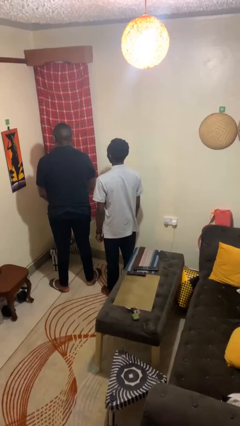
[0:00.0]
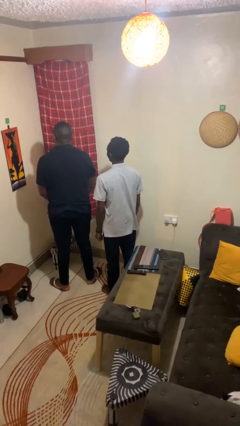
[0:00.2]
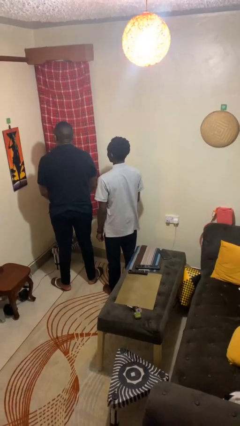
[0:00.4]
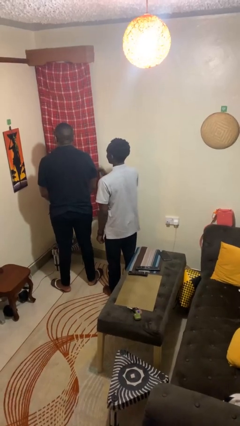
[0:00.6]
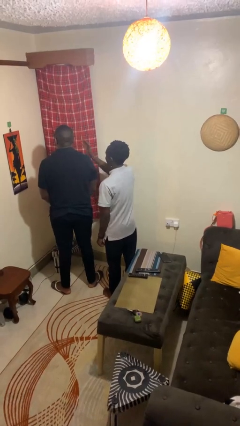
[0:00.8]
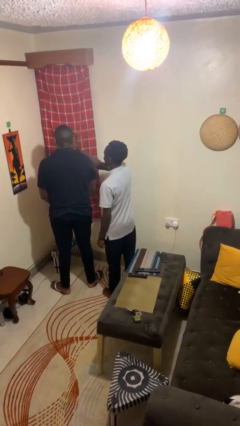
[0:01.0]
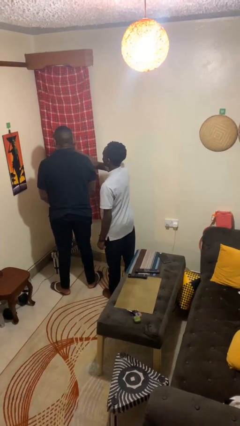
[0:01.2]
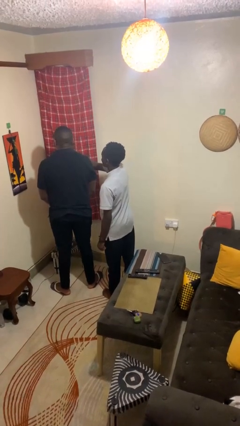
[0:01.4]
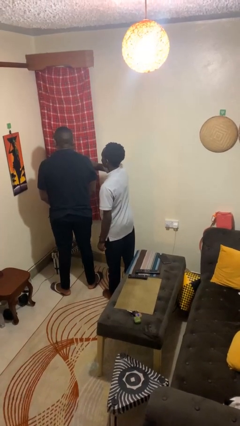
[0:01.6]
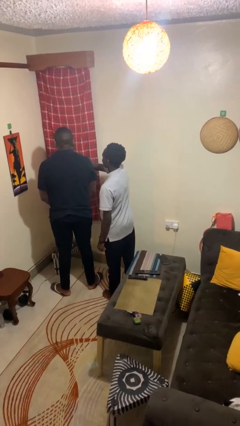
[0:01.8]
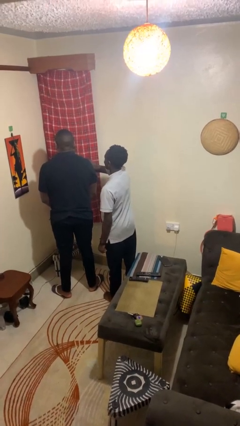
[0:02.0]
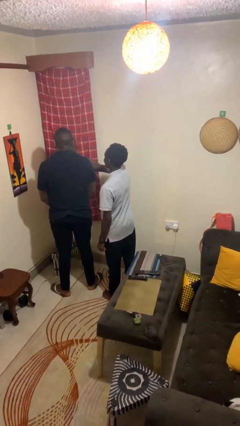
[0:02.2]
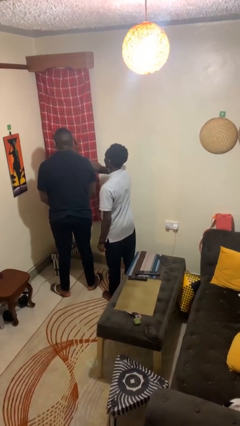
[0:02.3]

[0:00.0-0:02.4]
person touches face of person

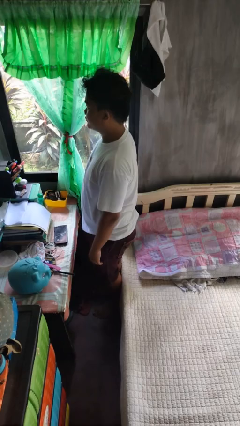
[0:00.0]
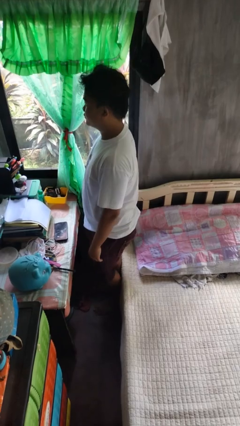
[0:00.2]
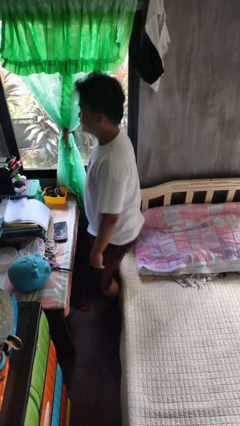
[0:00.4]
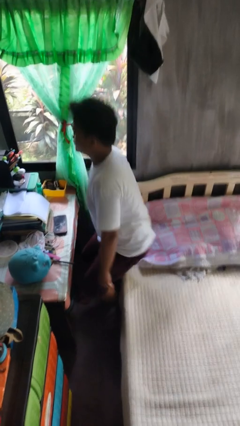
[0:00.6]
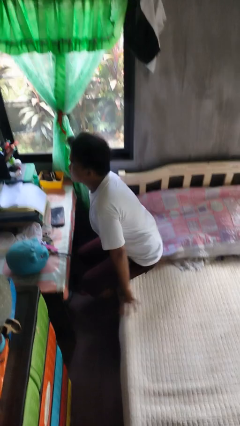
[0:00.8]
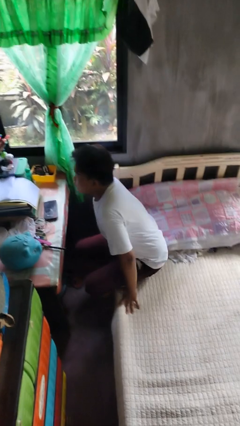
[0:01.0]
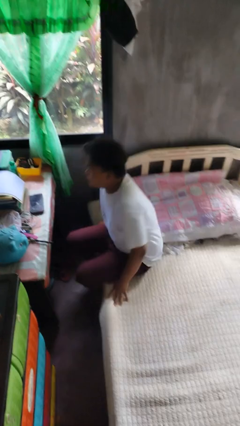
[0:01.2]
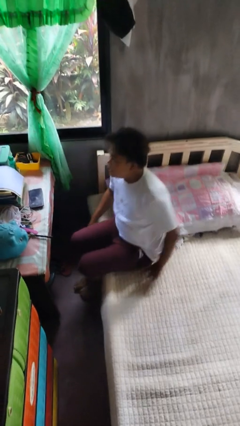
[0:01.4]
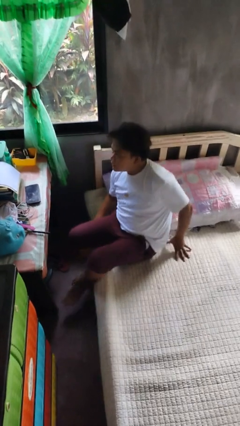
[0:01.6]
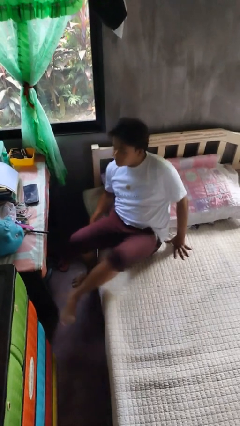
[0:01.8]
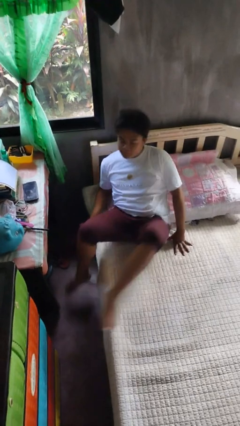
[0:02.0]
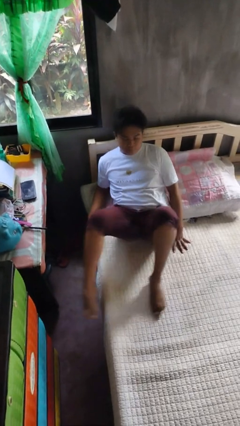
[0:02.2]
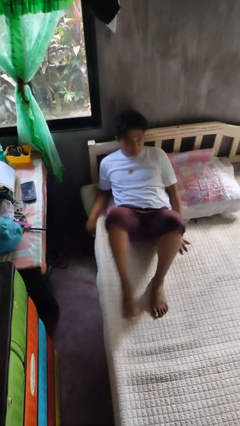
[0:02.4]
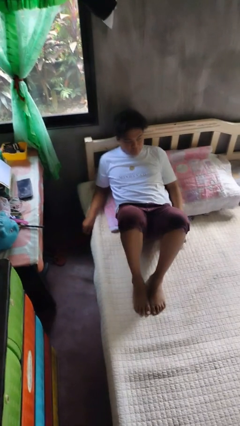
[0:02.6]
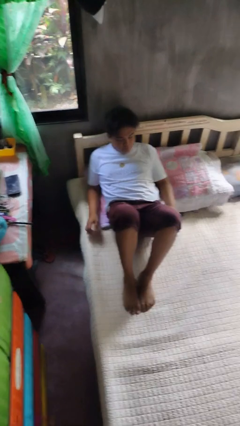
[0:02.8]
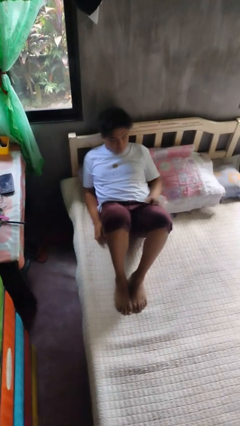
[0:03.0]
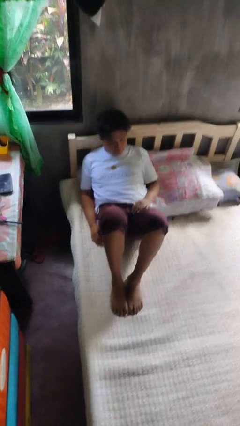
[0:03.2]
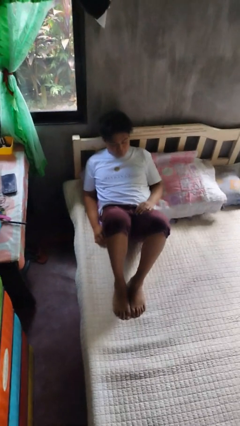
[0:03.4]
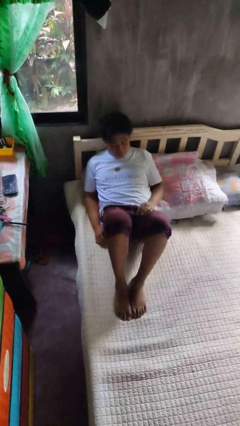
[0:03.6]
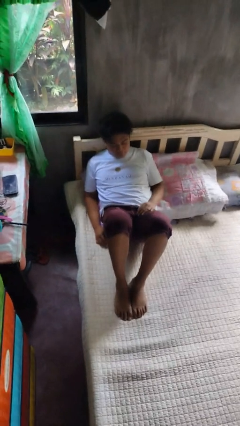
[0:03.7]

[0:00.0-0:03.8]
person lies down on bed

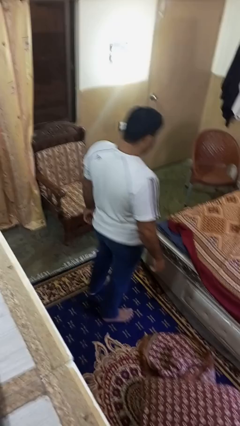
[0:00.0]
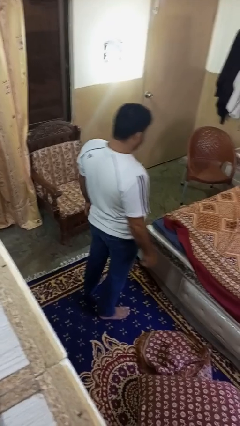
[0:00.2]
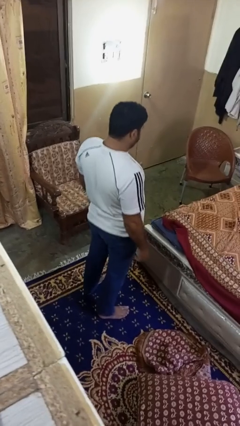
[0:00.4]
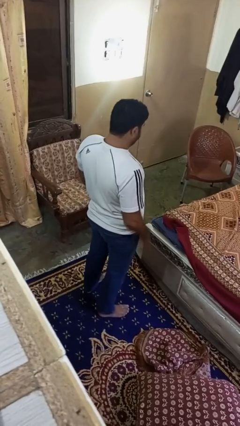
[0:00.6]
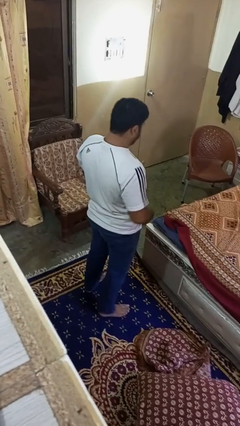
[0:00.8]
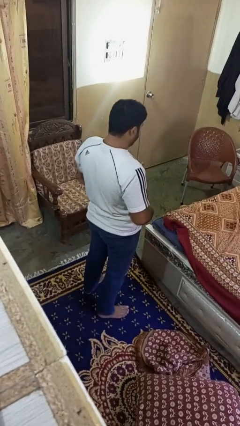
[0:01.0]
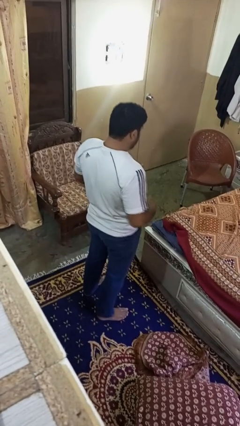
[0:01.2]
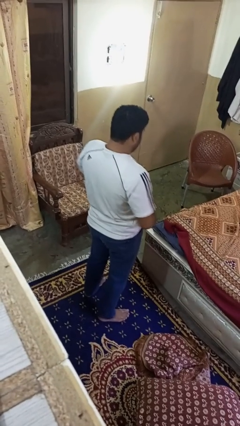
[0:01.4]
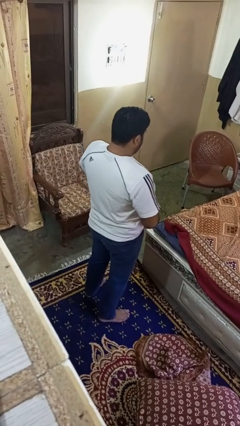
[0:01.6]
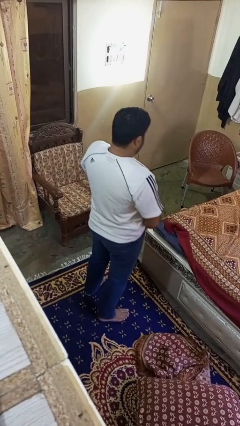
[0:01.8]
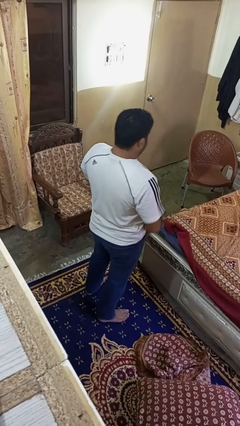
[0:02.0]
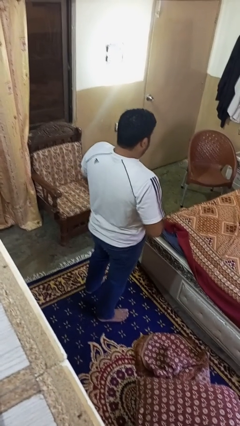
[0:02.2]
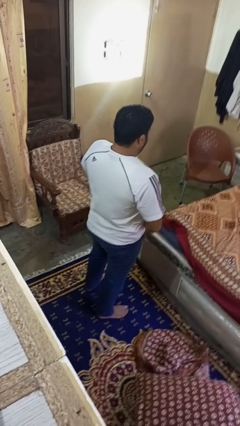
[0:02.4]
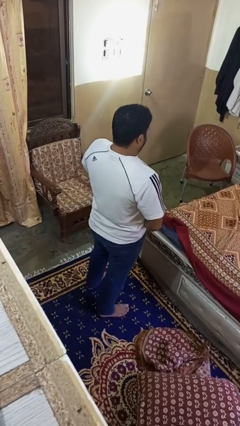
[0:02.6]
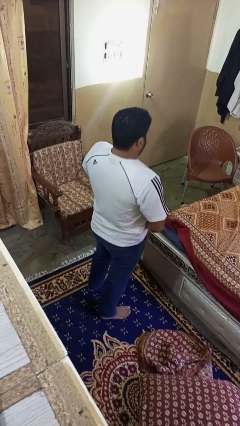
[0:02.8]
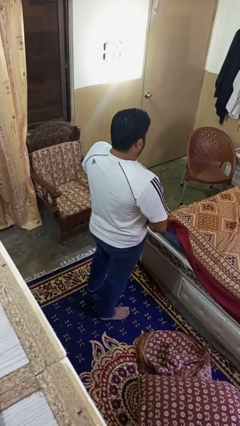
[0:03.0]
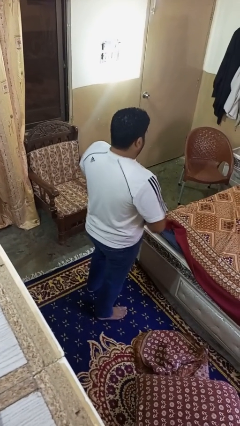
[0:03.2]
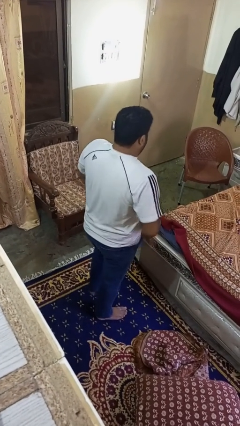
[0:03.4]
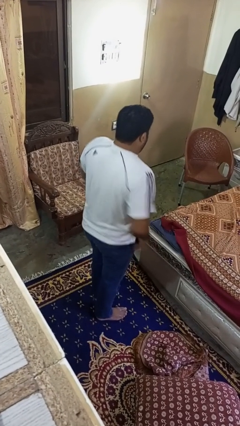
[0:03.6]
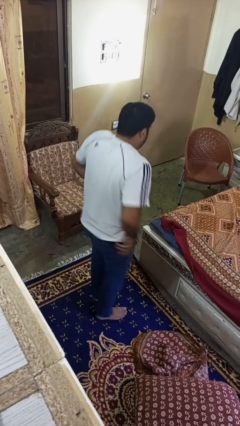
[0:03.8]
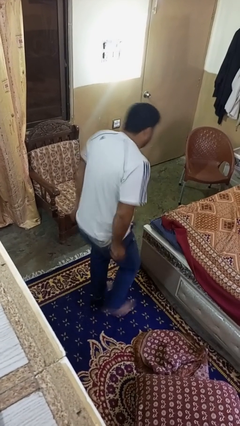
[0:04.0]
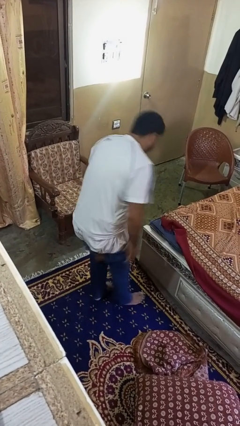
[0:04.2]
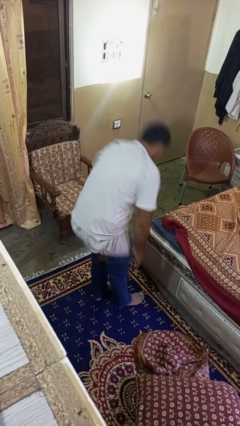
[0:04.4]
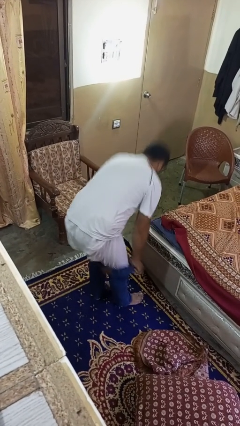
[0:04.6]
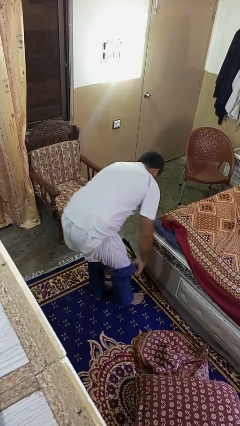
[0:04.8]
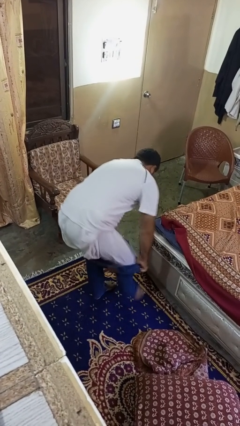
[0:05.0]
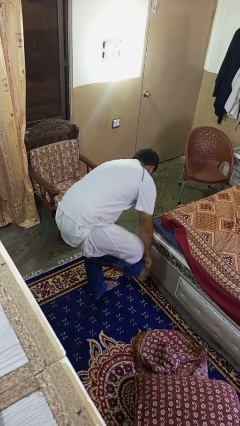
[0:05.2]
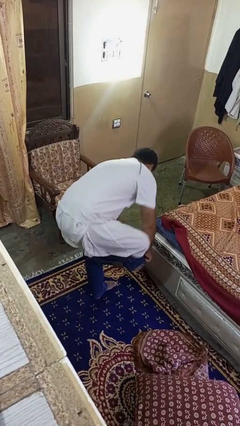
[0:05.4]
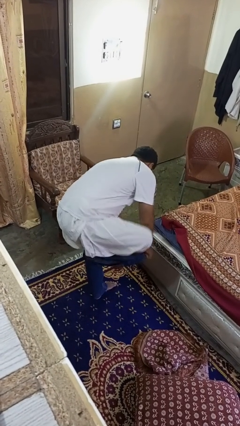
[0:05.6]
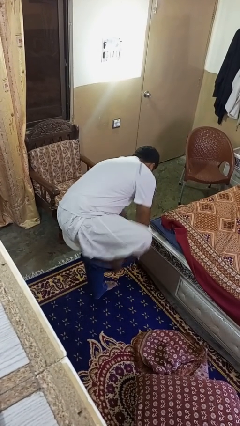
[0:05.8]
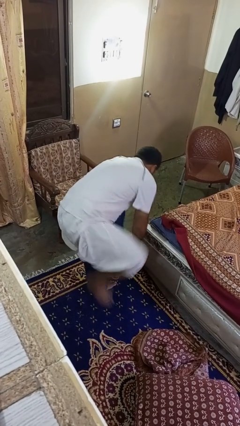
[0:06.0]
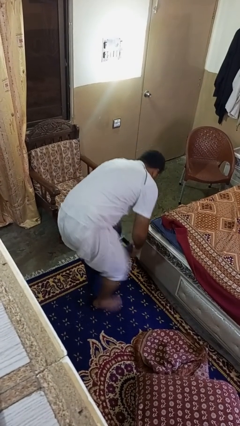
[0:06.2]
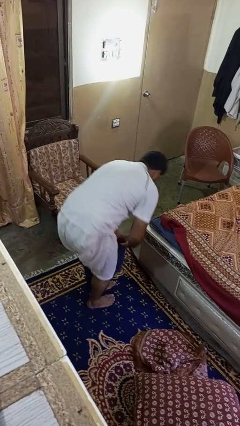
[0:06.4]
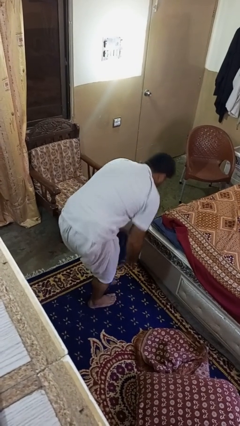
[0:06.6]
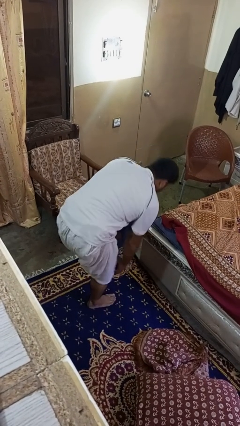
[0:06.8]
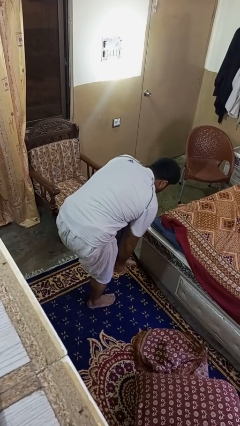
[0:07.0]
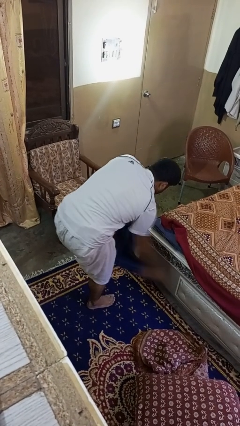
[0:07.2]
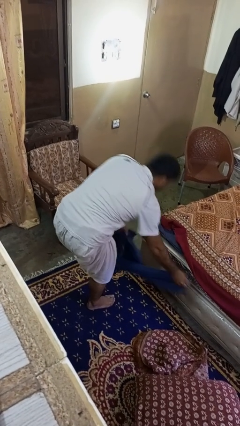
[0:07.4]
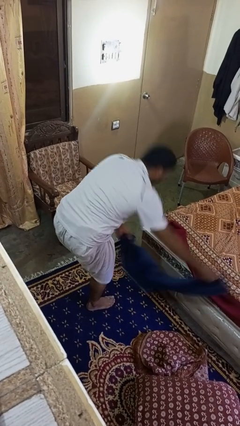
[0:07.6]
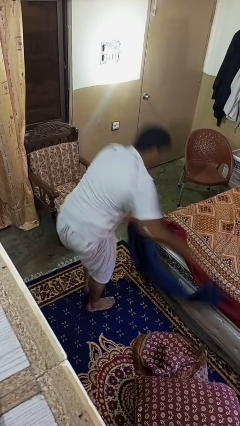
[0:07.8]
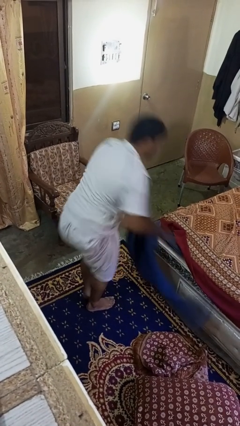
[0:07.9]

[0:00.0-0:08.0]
person takes off pants

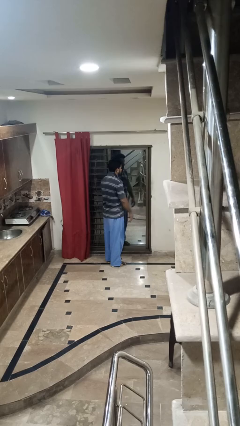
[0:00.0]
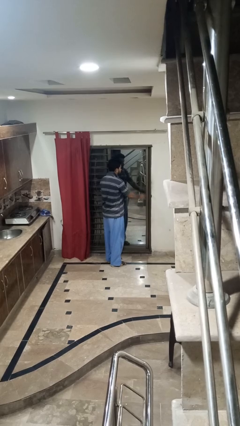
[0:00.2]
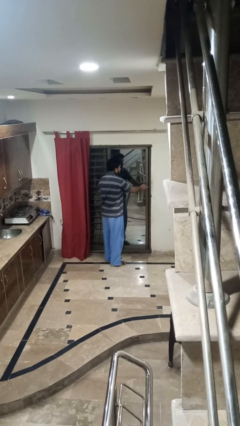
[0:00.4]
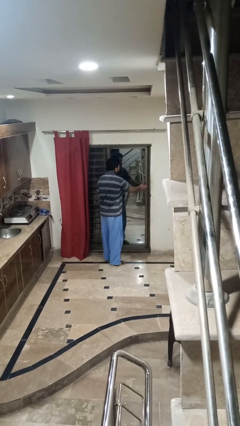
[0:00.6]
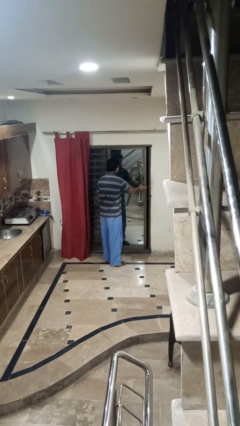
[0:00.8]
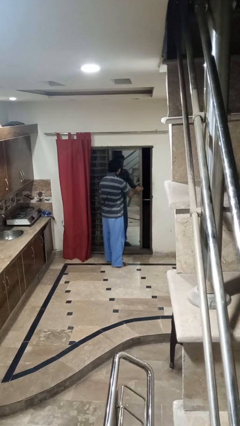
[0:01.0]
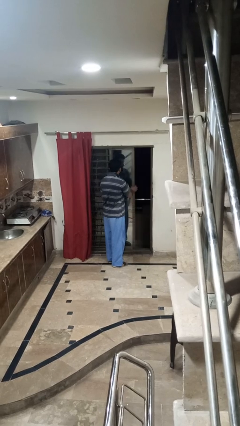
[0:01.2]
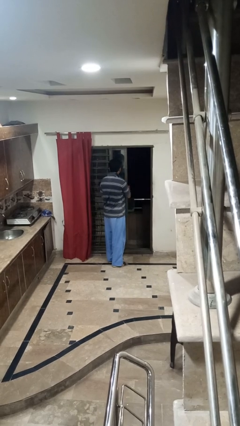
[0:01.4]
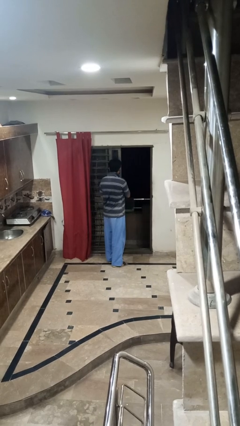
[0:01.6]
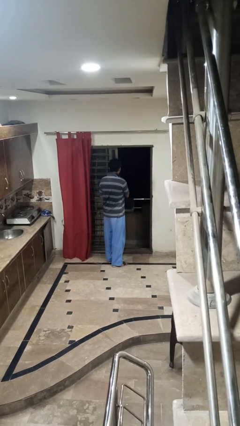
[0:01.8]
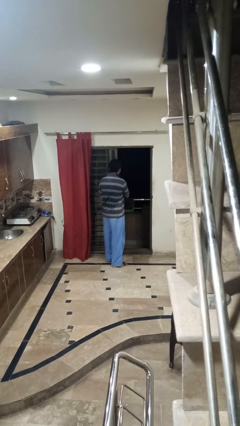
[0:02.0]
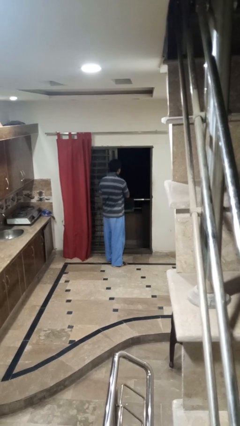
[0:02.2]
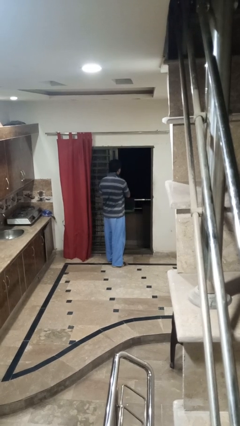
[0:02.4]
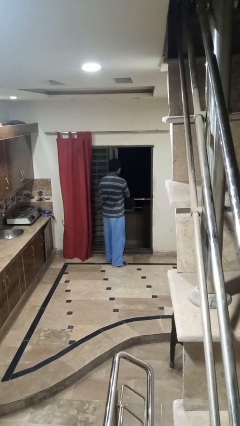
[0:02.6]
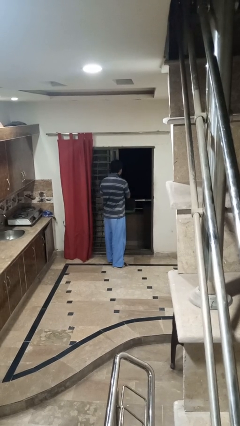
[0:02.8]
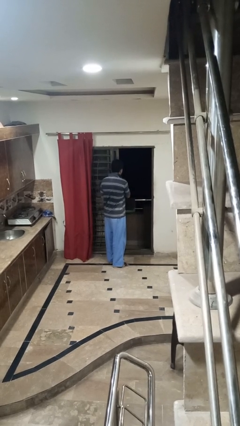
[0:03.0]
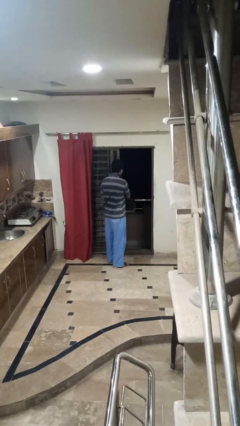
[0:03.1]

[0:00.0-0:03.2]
person opens sliding door

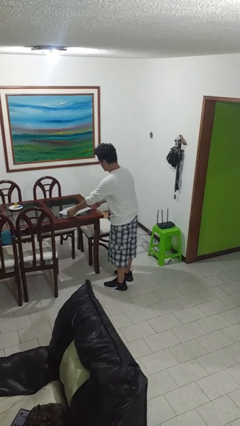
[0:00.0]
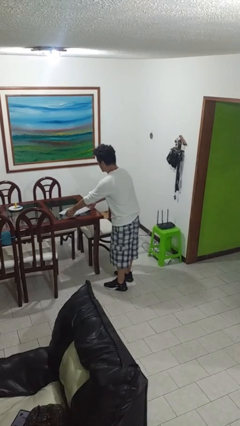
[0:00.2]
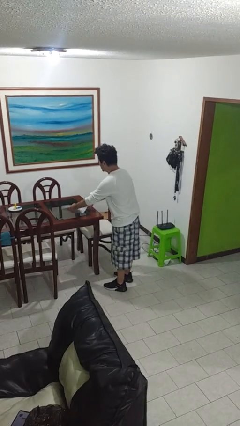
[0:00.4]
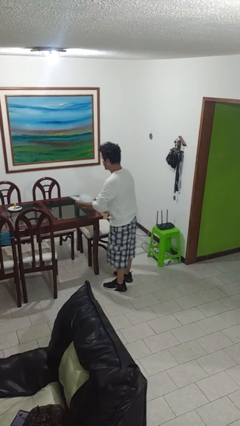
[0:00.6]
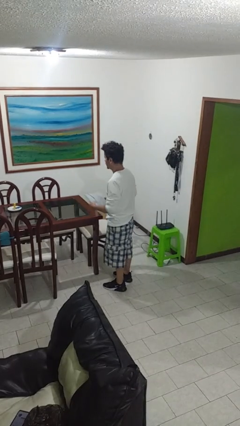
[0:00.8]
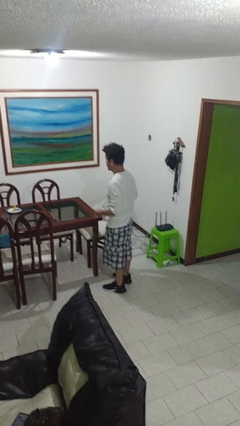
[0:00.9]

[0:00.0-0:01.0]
person picks up object from table
